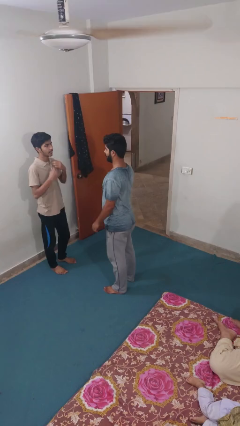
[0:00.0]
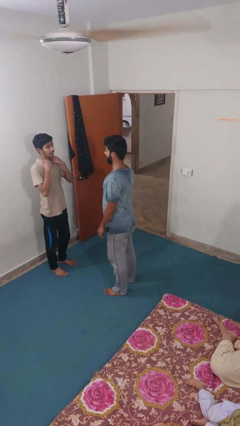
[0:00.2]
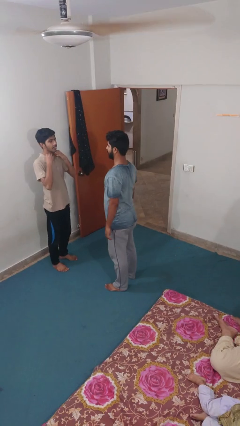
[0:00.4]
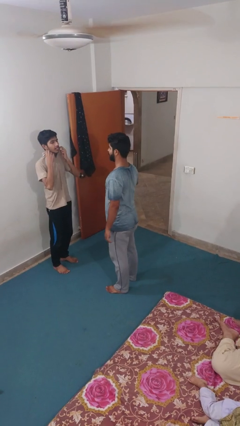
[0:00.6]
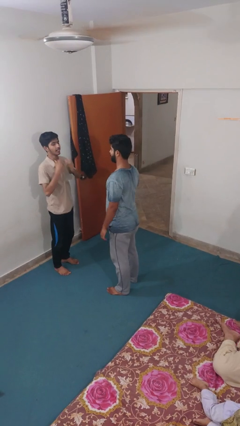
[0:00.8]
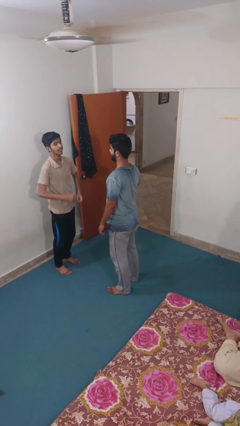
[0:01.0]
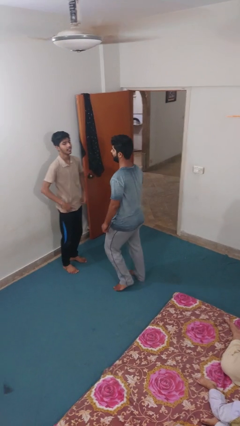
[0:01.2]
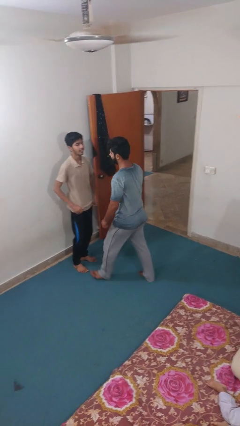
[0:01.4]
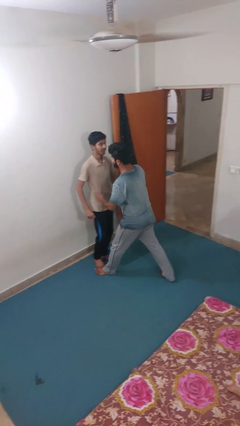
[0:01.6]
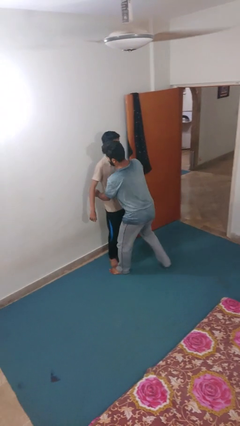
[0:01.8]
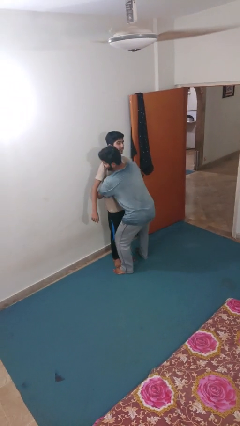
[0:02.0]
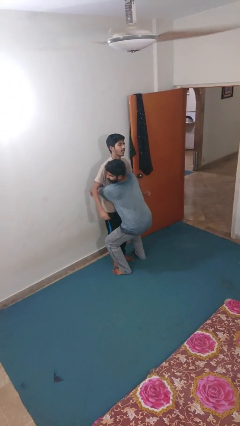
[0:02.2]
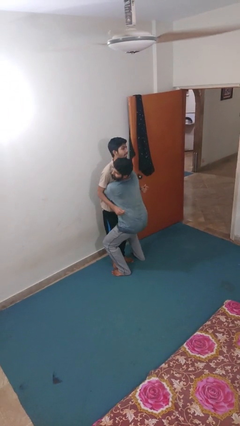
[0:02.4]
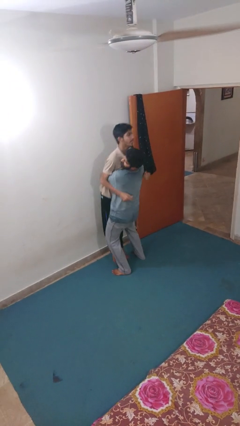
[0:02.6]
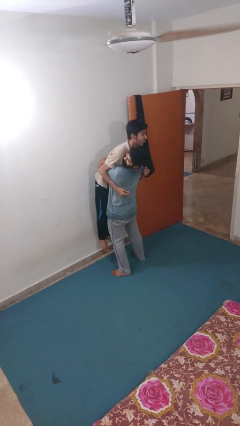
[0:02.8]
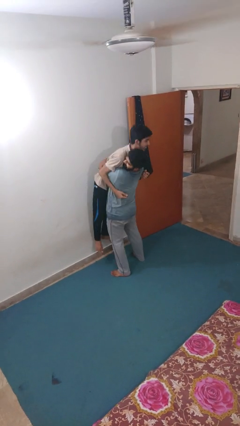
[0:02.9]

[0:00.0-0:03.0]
person picks up person

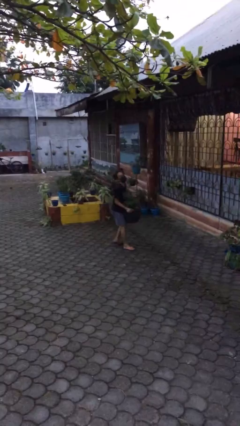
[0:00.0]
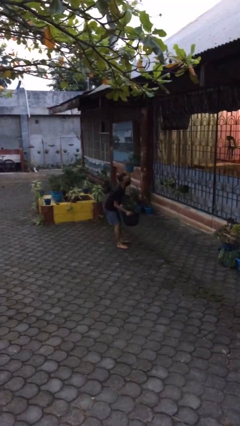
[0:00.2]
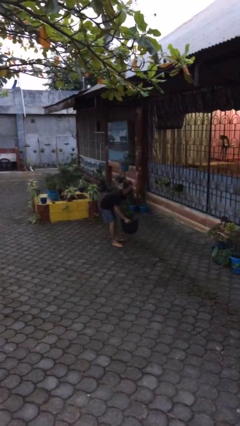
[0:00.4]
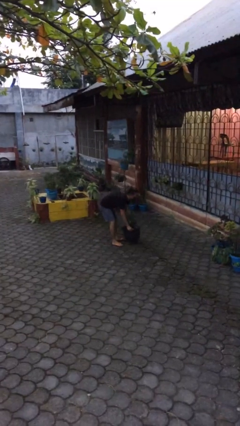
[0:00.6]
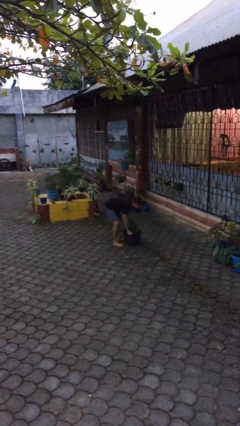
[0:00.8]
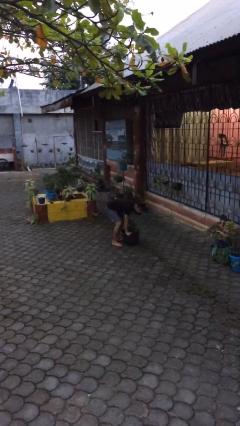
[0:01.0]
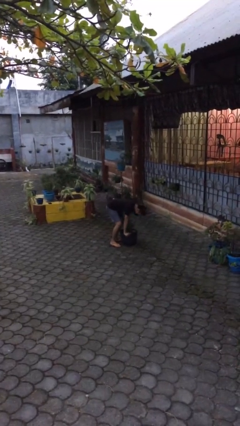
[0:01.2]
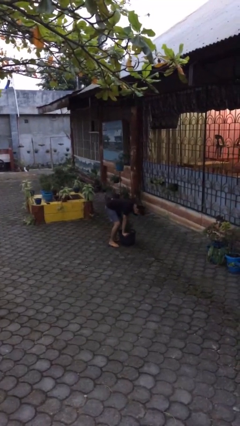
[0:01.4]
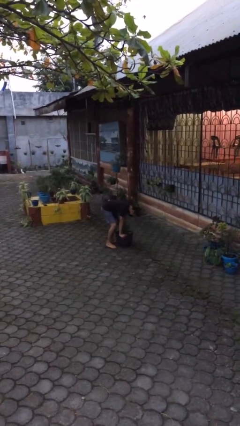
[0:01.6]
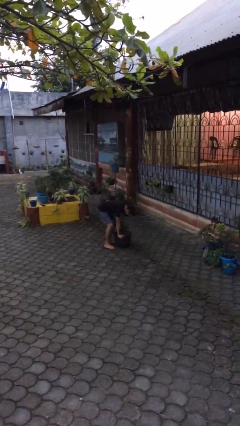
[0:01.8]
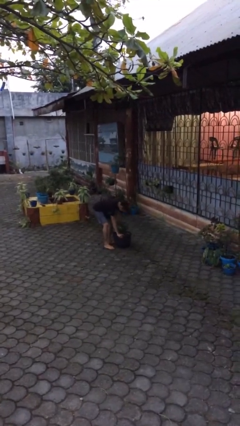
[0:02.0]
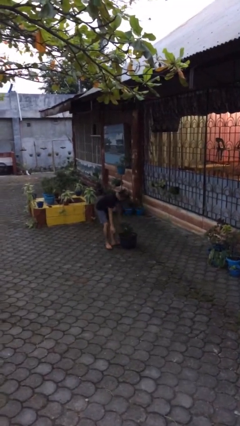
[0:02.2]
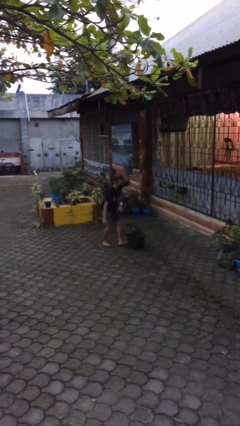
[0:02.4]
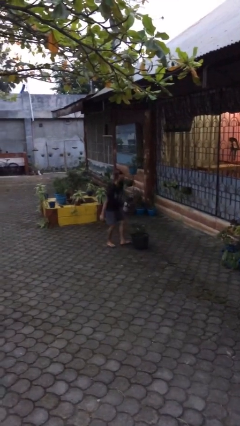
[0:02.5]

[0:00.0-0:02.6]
person puts down object on floor

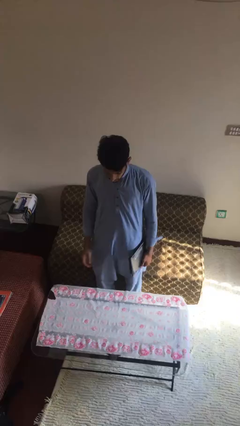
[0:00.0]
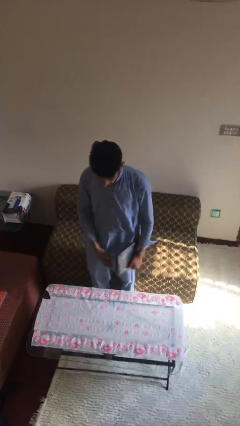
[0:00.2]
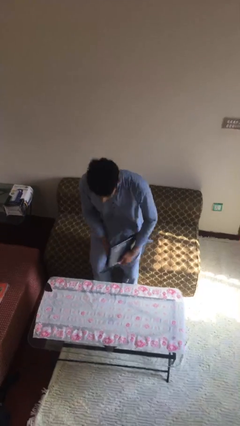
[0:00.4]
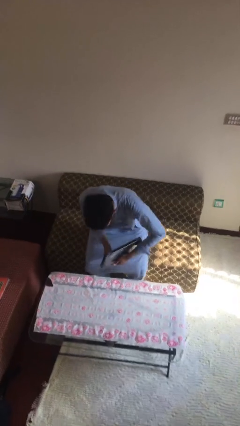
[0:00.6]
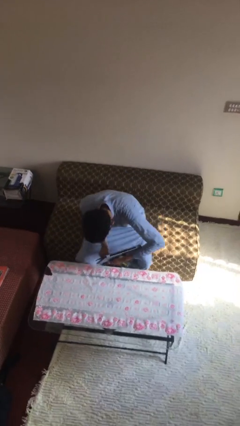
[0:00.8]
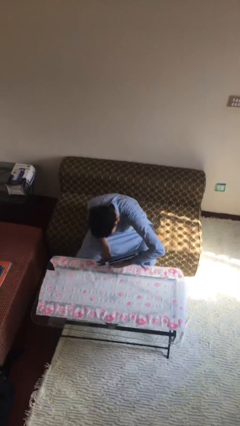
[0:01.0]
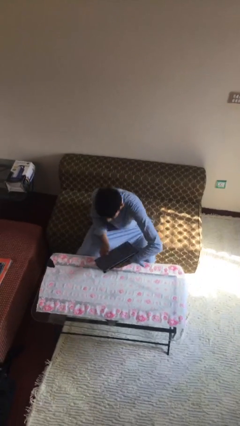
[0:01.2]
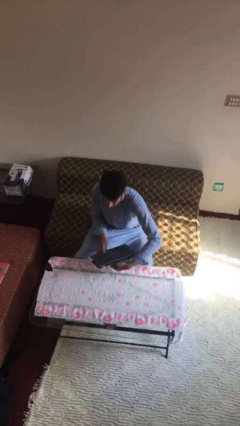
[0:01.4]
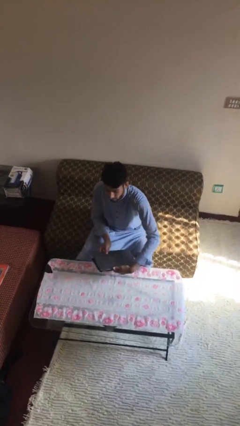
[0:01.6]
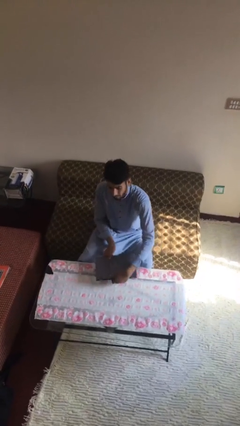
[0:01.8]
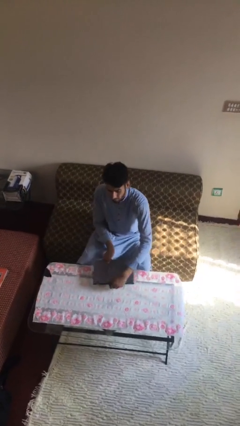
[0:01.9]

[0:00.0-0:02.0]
person sits down

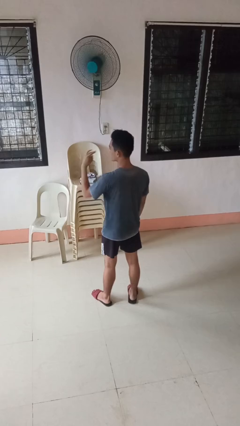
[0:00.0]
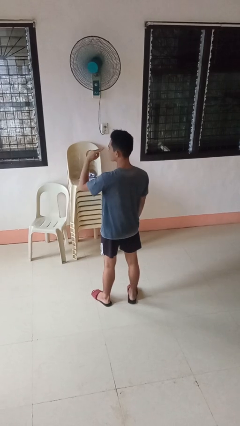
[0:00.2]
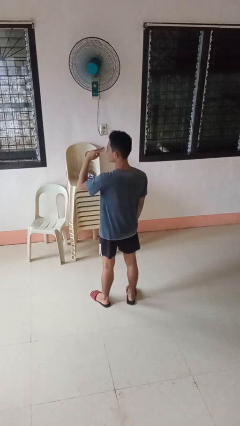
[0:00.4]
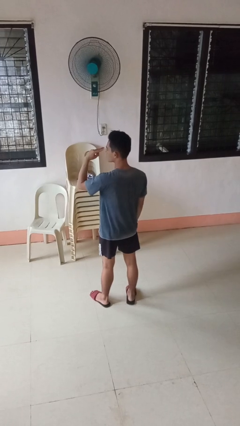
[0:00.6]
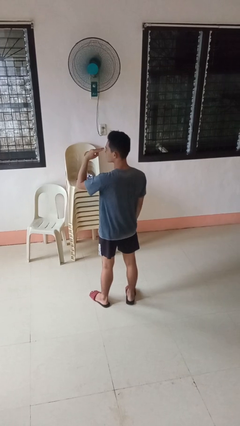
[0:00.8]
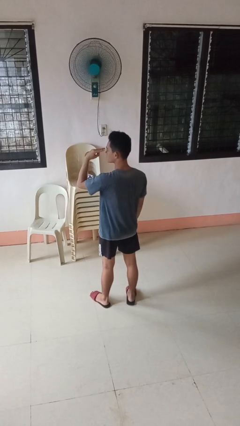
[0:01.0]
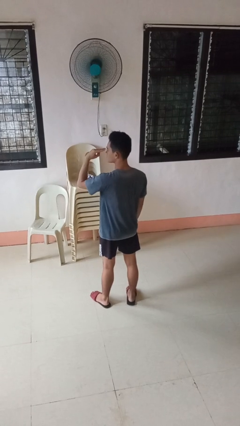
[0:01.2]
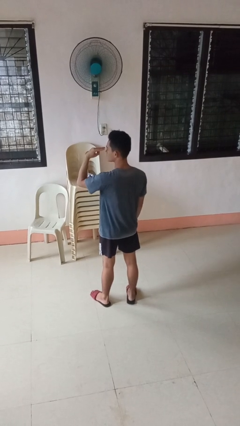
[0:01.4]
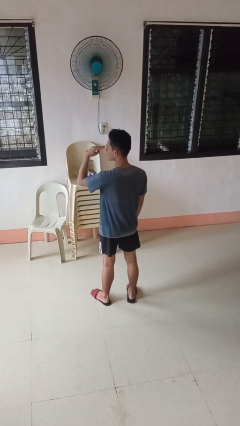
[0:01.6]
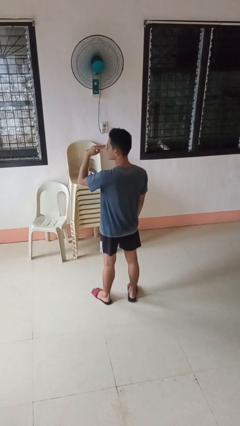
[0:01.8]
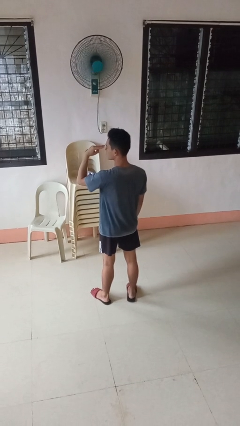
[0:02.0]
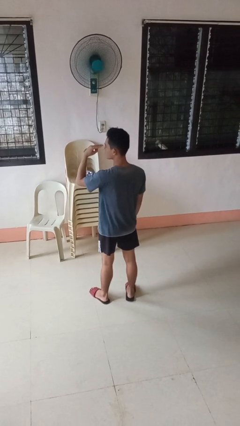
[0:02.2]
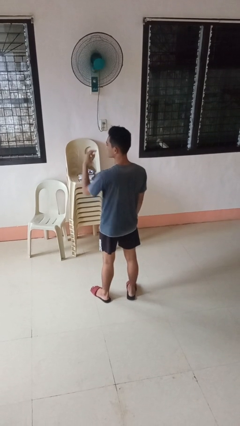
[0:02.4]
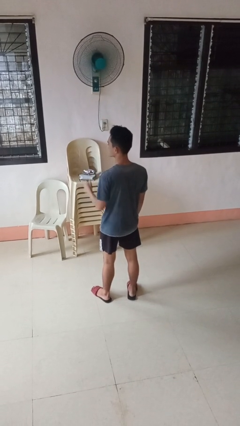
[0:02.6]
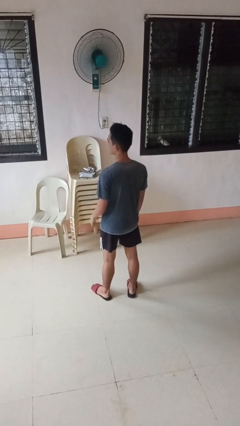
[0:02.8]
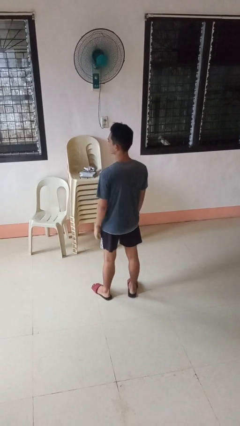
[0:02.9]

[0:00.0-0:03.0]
person gestures watch closely

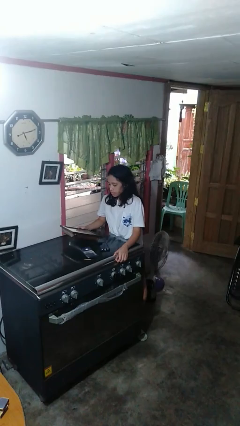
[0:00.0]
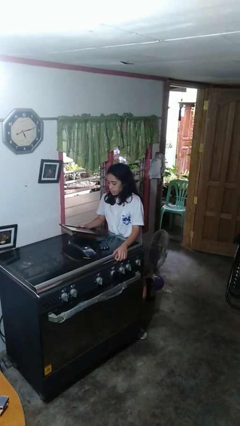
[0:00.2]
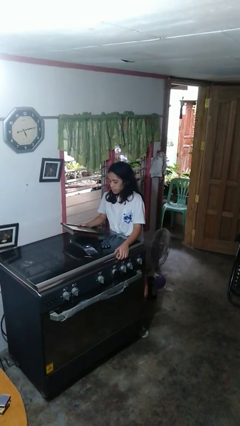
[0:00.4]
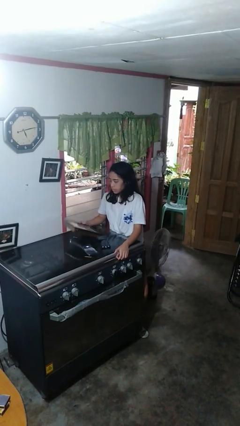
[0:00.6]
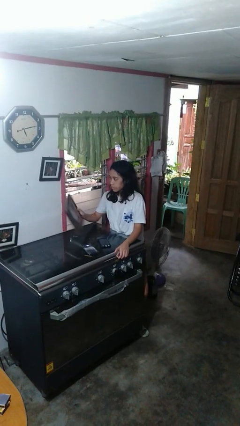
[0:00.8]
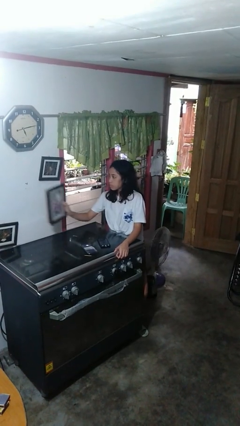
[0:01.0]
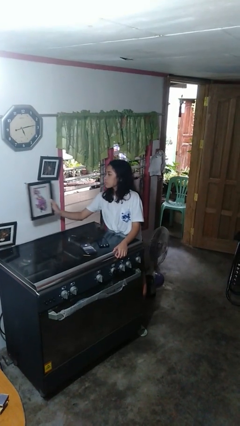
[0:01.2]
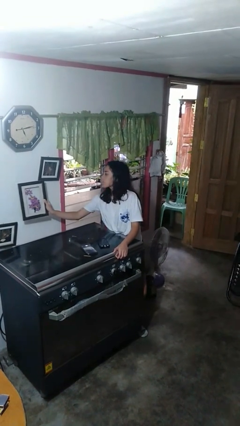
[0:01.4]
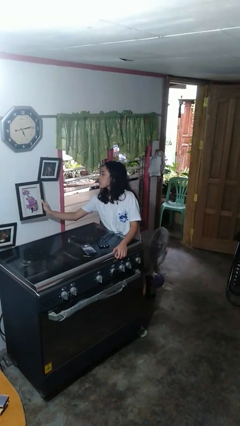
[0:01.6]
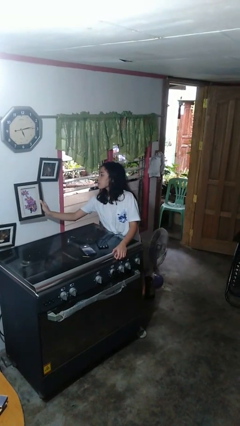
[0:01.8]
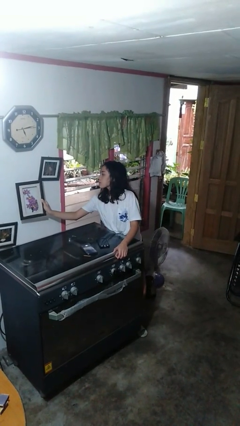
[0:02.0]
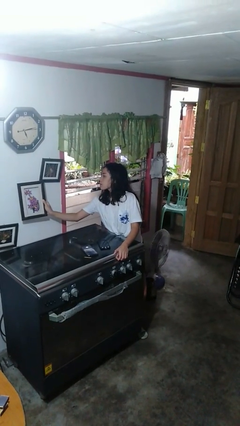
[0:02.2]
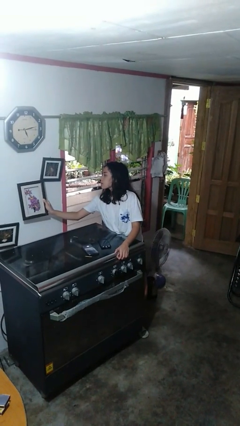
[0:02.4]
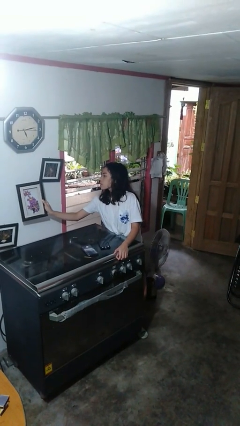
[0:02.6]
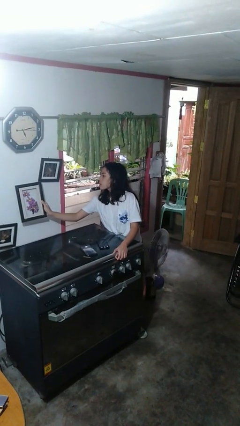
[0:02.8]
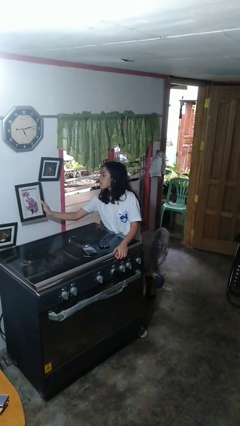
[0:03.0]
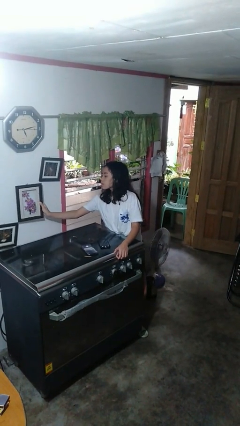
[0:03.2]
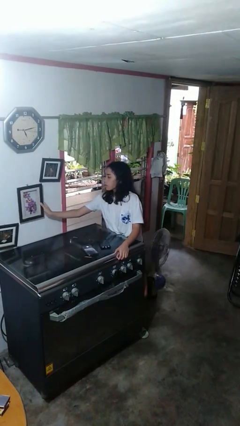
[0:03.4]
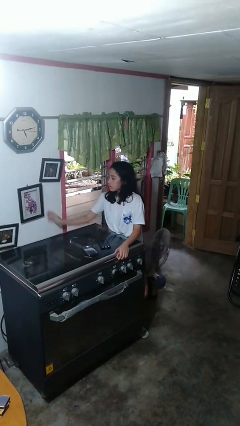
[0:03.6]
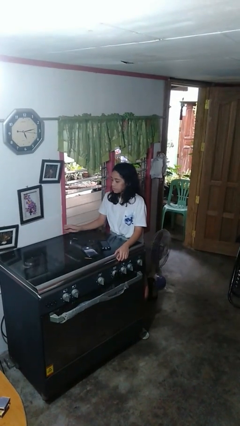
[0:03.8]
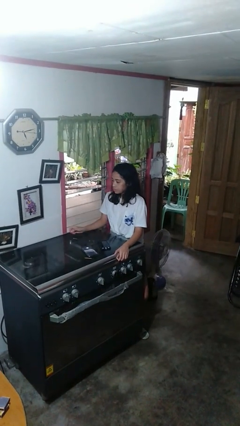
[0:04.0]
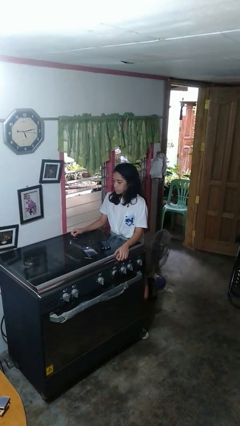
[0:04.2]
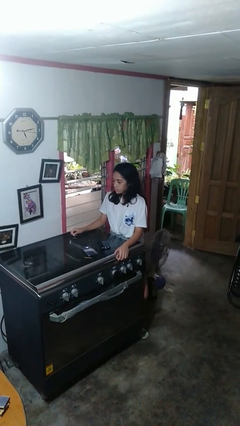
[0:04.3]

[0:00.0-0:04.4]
person puts up picture frame

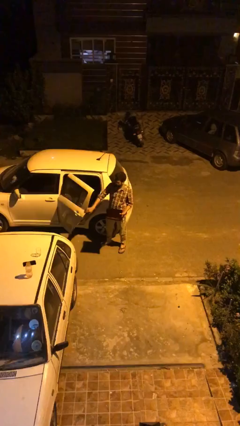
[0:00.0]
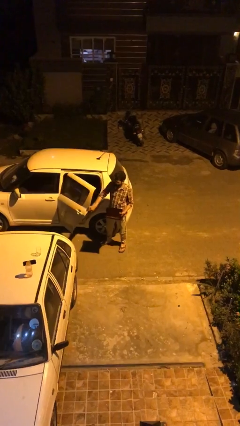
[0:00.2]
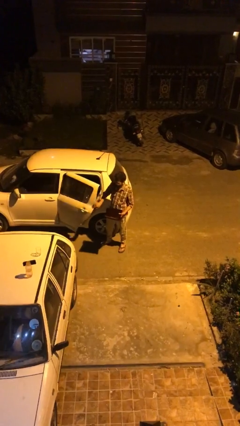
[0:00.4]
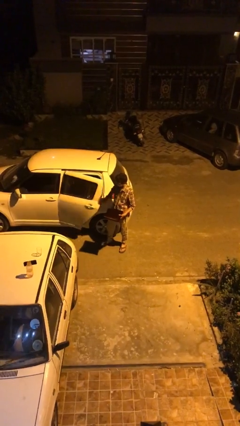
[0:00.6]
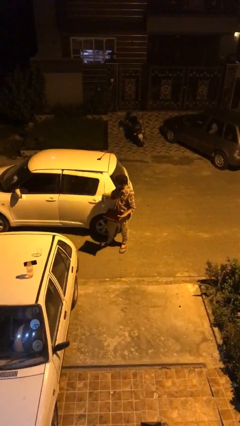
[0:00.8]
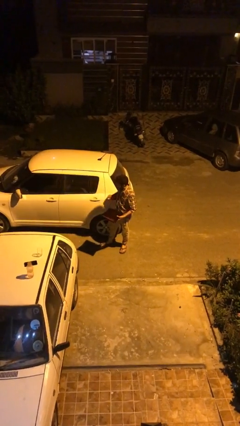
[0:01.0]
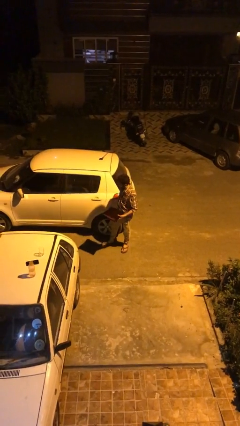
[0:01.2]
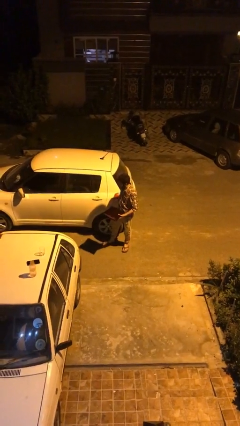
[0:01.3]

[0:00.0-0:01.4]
person closes car door

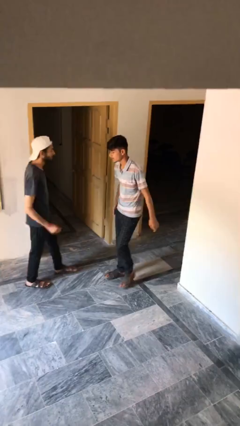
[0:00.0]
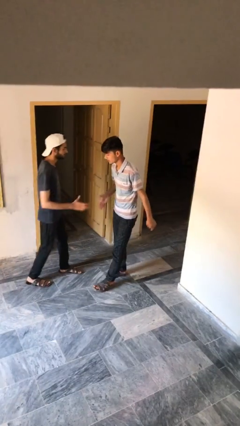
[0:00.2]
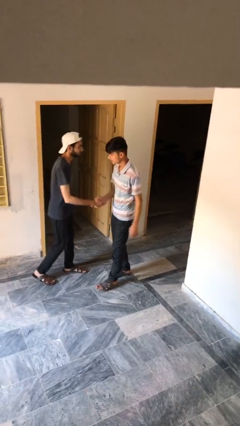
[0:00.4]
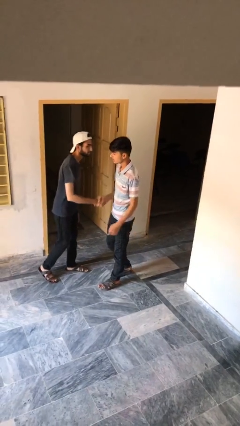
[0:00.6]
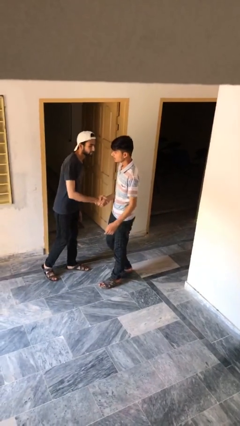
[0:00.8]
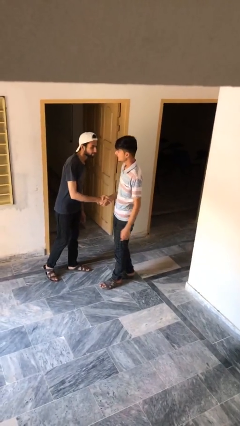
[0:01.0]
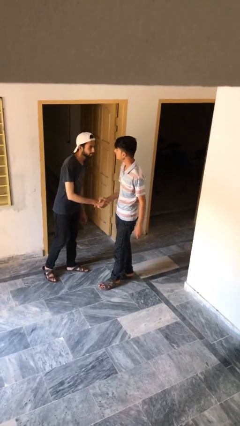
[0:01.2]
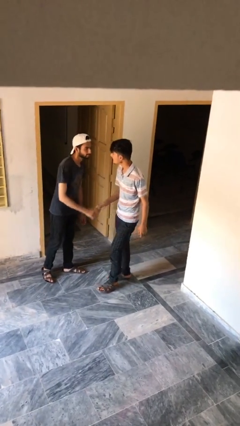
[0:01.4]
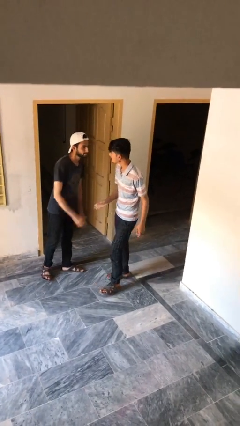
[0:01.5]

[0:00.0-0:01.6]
person shakes hand
